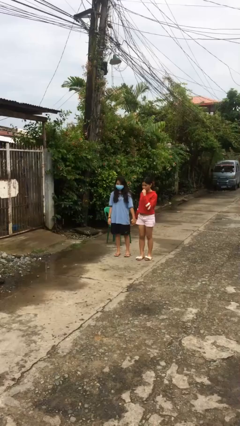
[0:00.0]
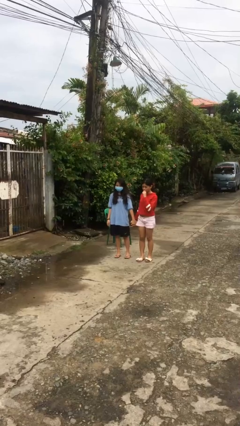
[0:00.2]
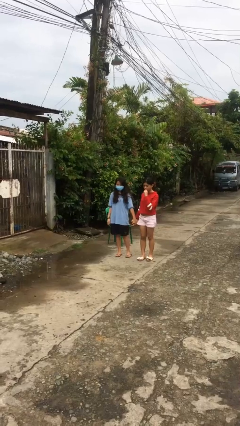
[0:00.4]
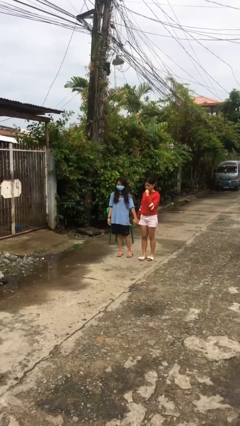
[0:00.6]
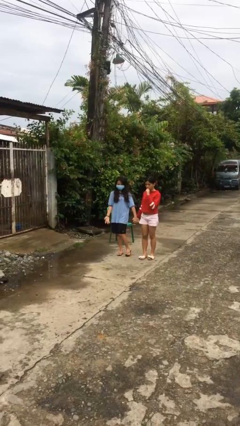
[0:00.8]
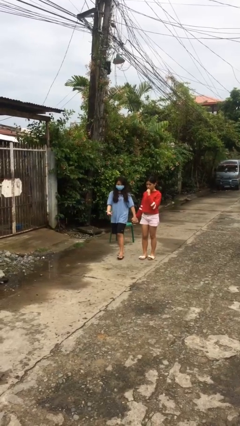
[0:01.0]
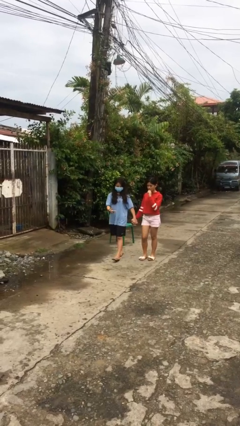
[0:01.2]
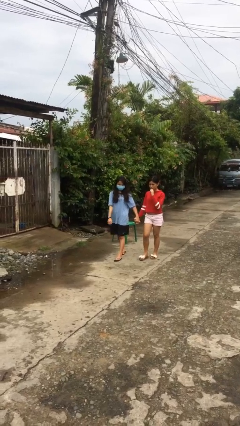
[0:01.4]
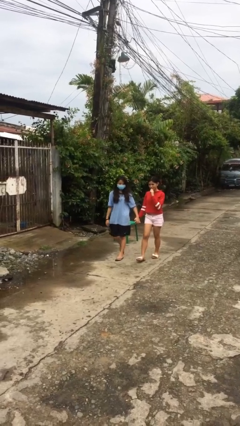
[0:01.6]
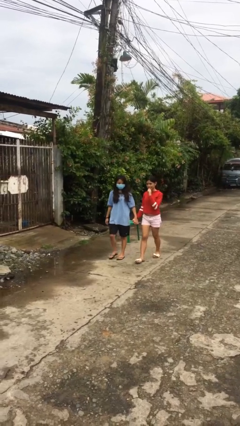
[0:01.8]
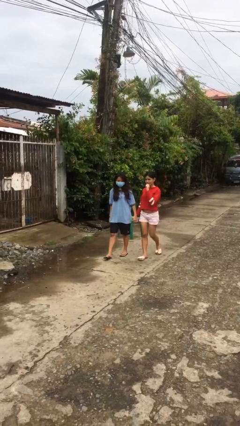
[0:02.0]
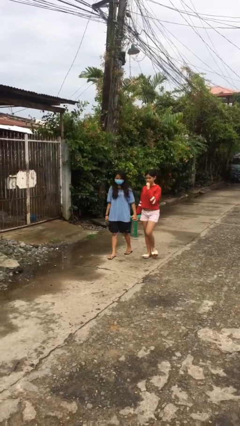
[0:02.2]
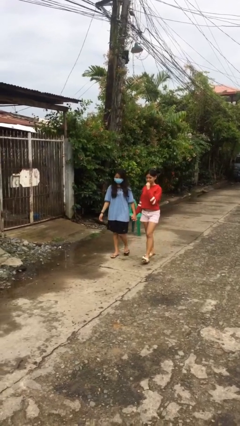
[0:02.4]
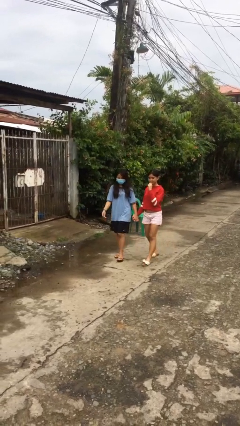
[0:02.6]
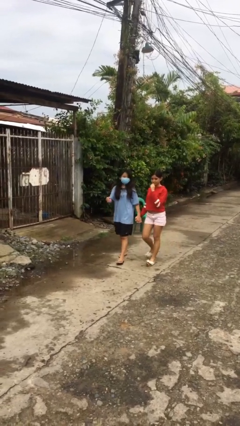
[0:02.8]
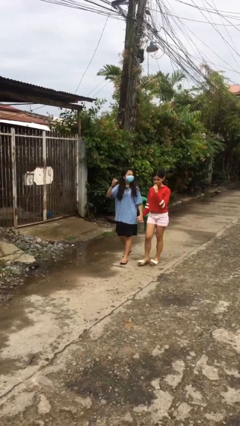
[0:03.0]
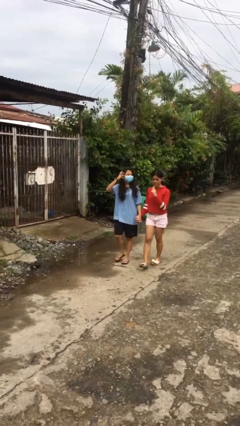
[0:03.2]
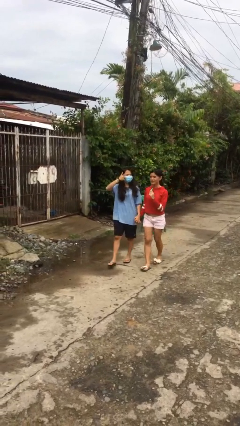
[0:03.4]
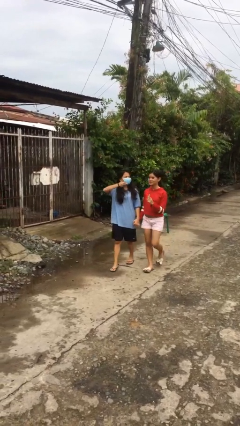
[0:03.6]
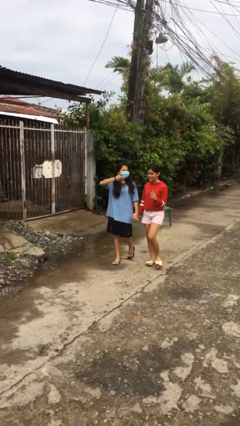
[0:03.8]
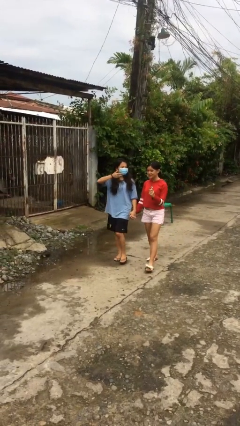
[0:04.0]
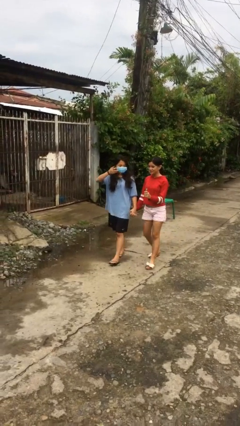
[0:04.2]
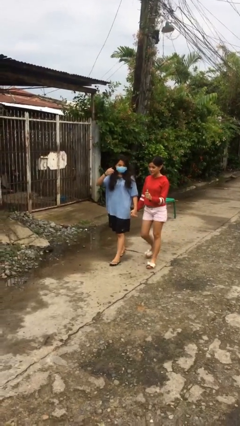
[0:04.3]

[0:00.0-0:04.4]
person holds hand

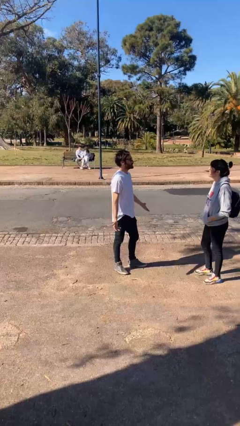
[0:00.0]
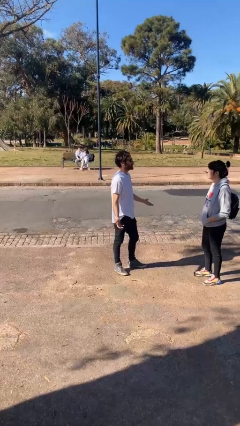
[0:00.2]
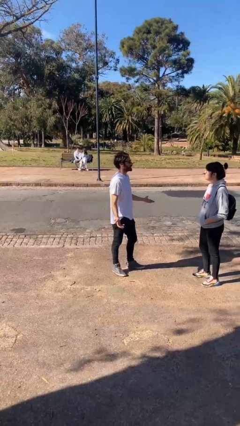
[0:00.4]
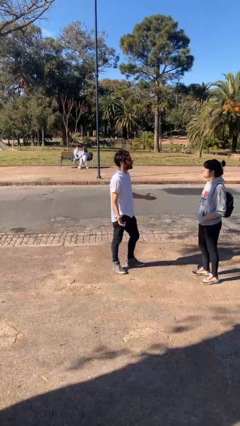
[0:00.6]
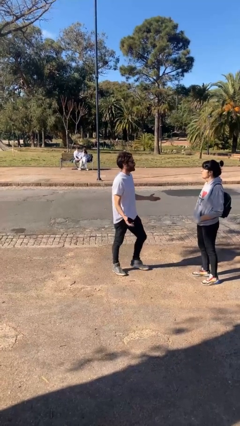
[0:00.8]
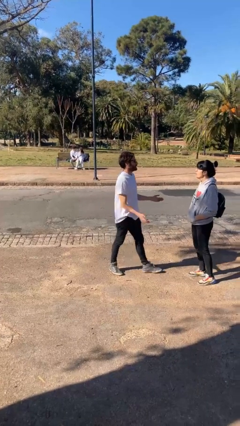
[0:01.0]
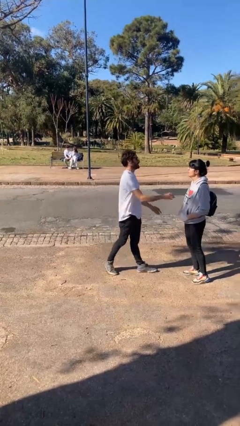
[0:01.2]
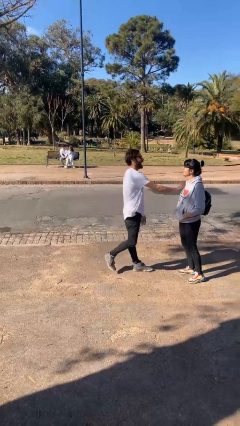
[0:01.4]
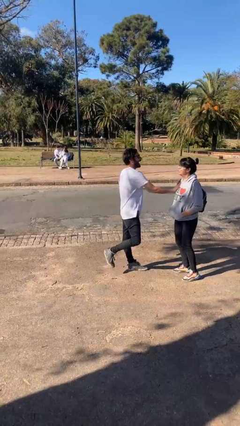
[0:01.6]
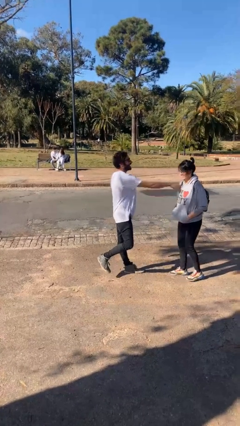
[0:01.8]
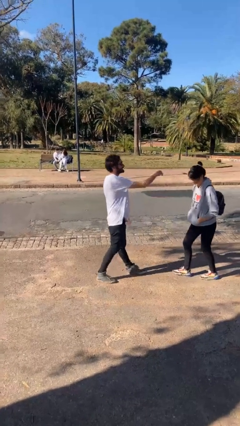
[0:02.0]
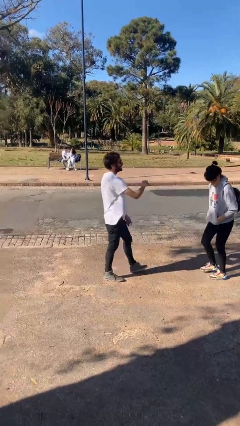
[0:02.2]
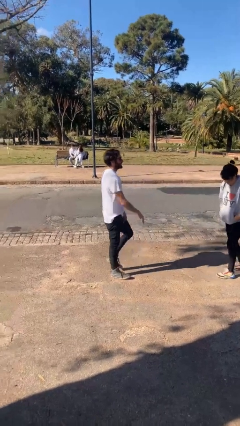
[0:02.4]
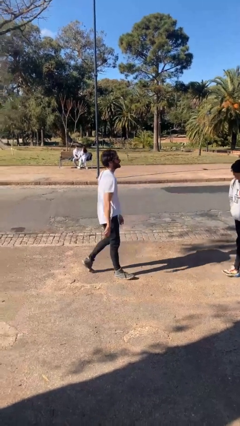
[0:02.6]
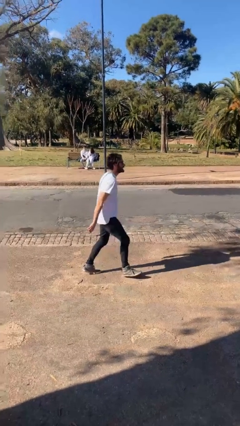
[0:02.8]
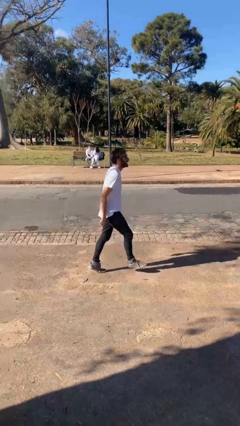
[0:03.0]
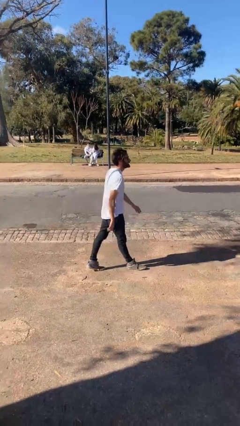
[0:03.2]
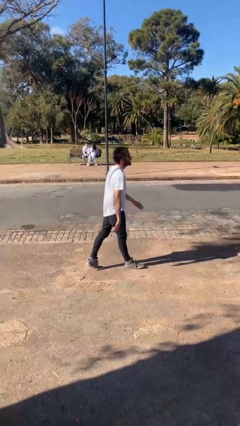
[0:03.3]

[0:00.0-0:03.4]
person shoves person

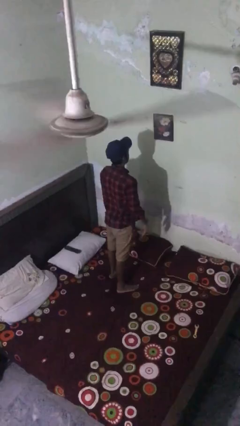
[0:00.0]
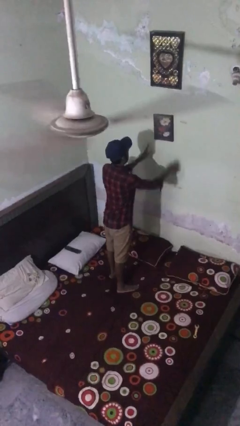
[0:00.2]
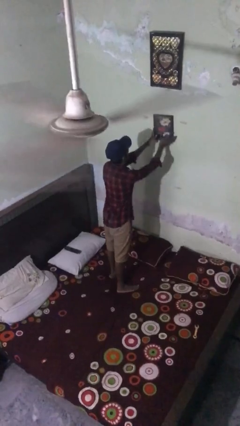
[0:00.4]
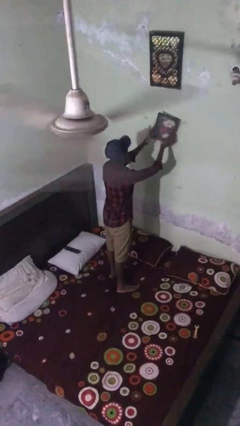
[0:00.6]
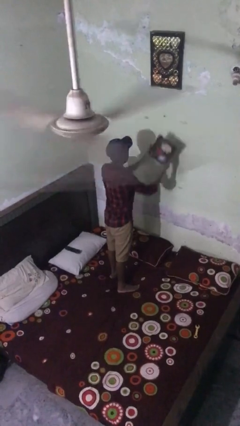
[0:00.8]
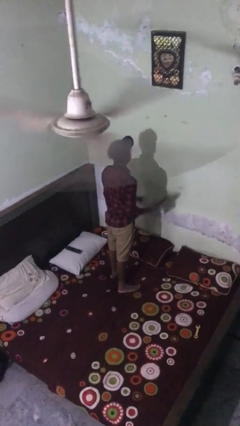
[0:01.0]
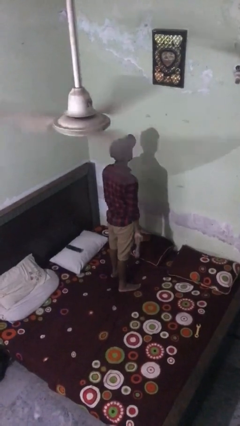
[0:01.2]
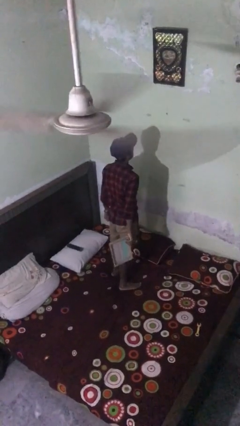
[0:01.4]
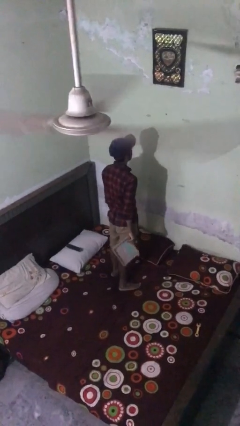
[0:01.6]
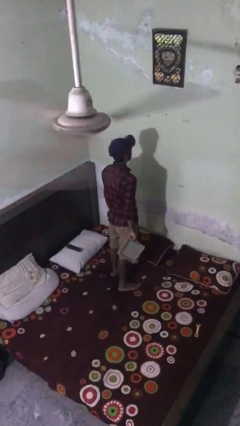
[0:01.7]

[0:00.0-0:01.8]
person takes down picture frame

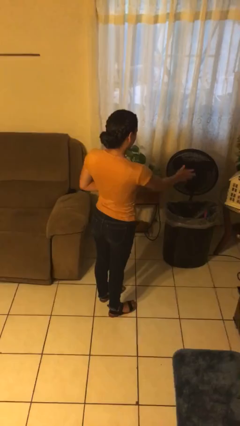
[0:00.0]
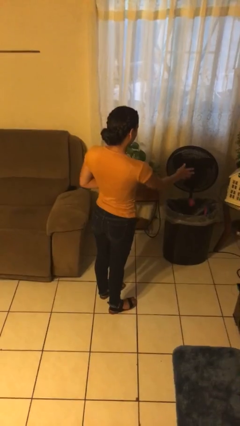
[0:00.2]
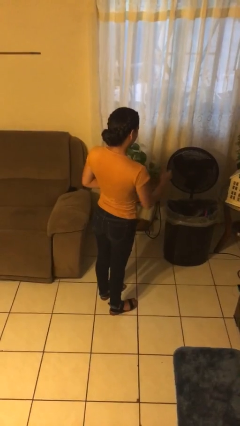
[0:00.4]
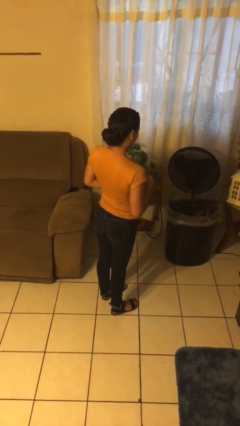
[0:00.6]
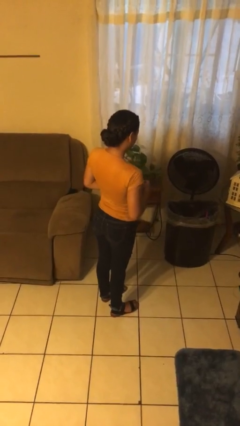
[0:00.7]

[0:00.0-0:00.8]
person discards trash

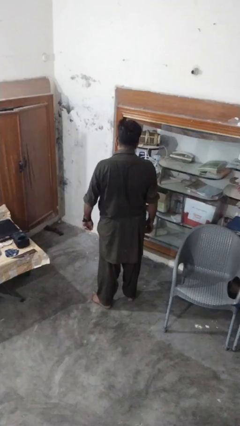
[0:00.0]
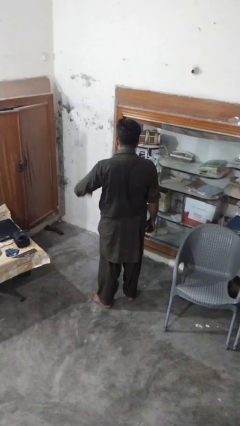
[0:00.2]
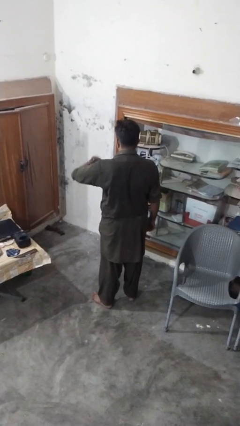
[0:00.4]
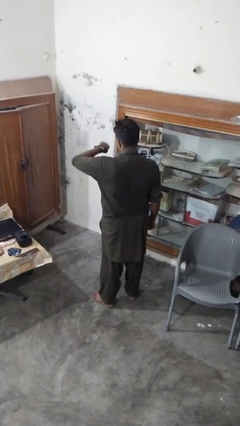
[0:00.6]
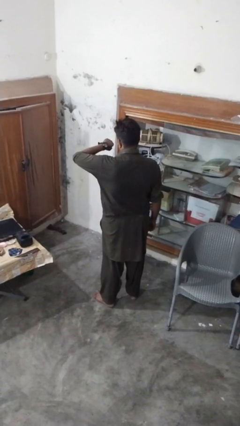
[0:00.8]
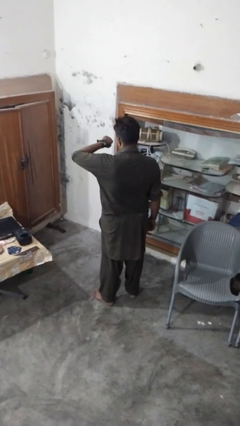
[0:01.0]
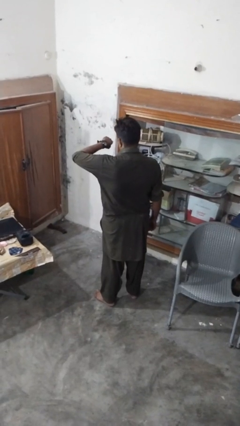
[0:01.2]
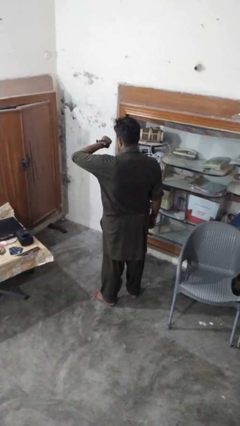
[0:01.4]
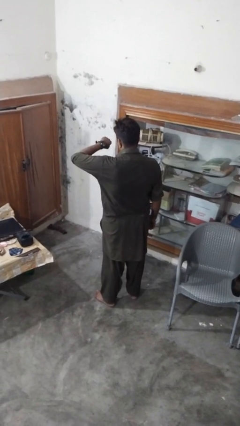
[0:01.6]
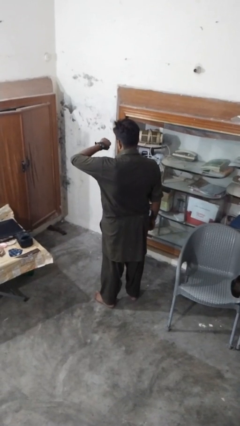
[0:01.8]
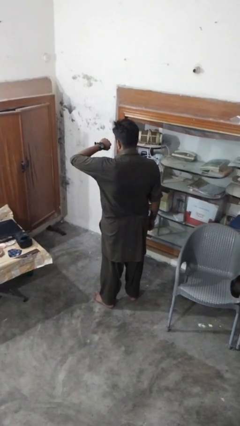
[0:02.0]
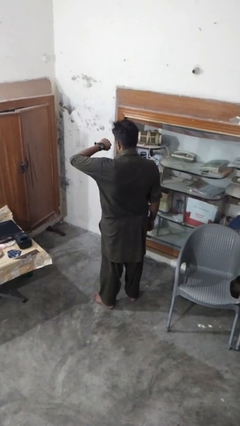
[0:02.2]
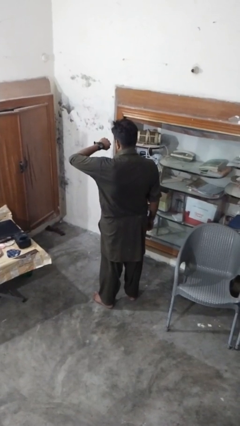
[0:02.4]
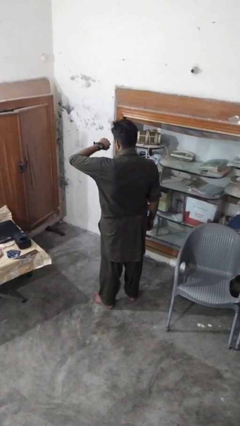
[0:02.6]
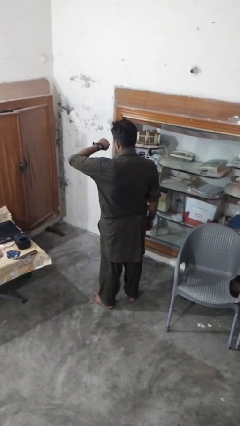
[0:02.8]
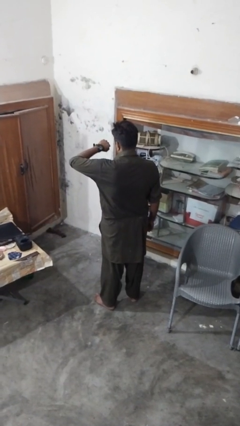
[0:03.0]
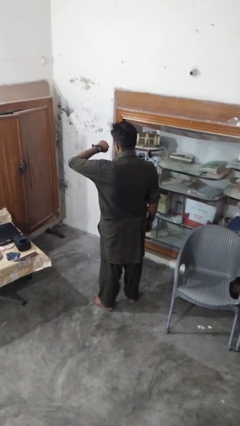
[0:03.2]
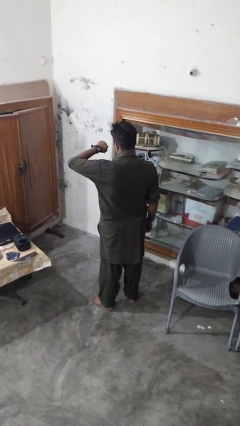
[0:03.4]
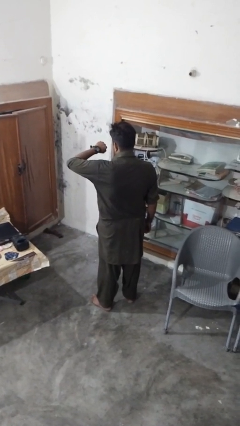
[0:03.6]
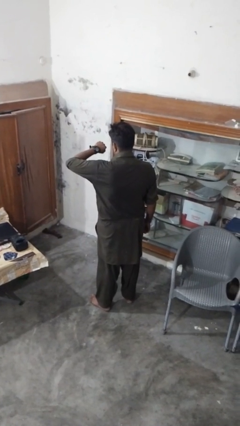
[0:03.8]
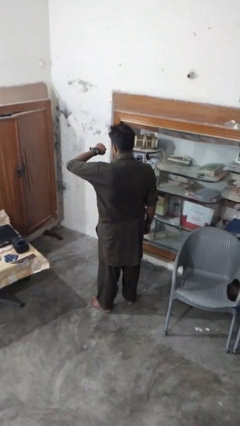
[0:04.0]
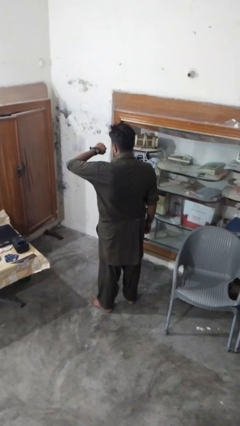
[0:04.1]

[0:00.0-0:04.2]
person looks at wristwatch

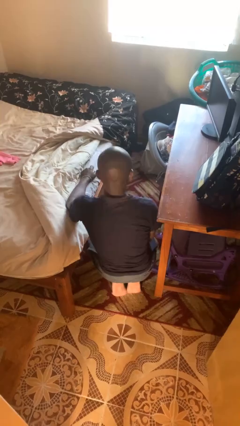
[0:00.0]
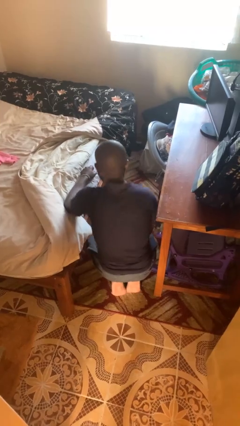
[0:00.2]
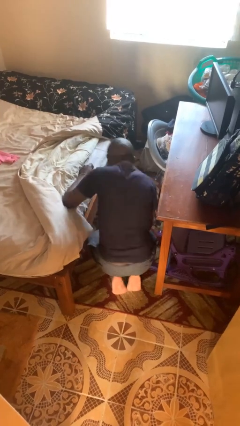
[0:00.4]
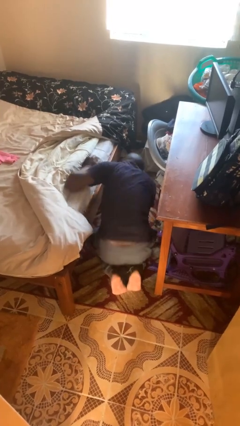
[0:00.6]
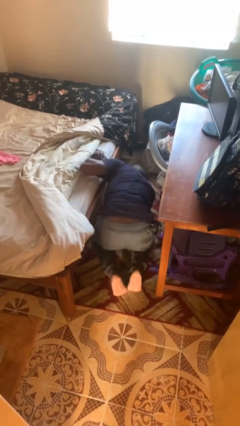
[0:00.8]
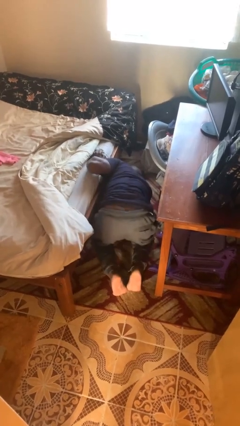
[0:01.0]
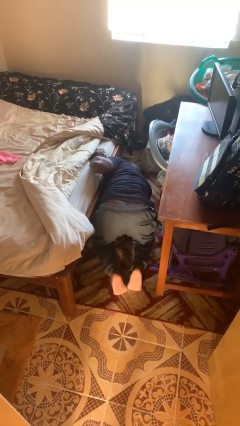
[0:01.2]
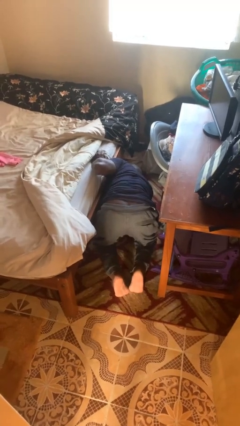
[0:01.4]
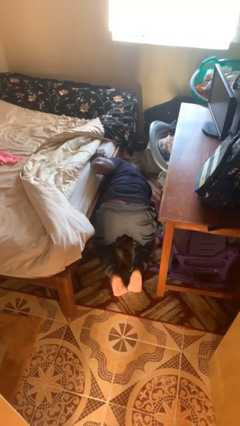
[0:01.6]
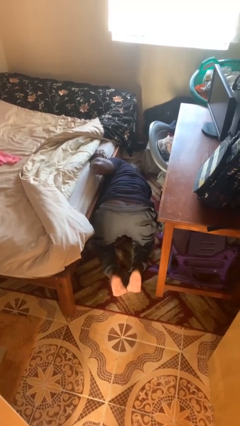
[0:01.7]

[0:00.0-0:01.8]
person searches under bed

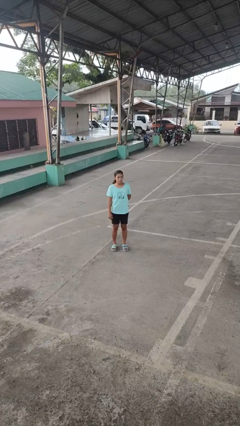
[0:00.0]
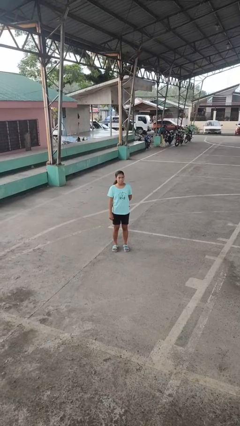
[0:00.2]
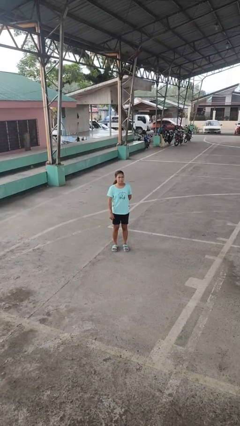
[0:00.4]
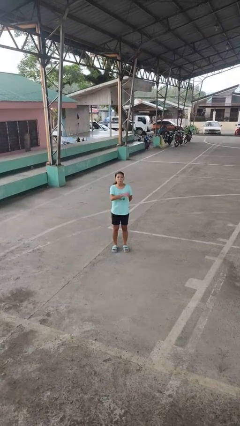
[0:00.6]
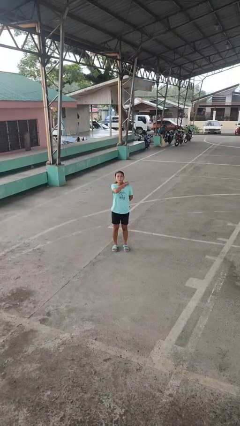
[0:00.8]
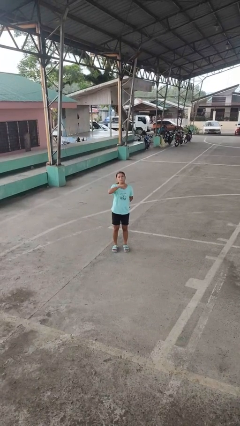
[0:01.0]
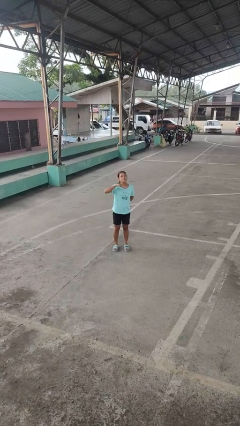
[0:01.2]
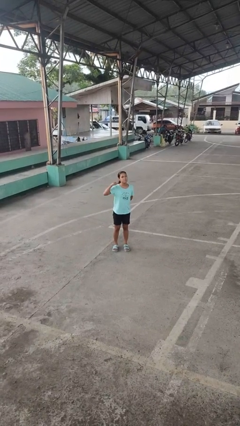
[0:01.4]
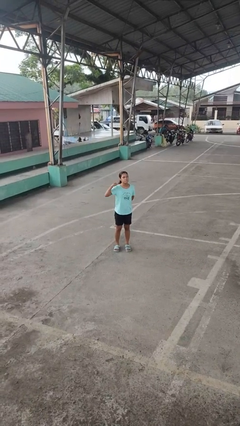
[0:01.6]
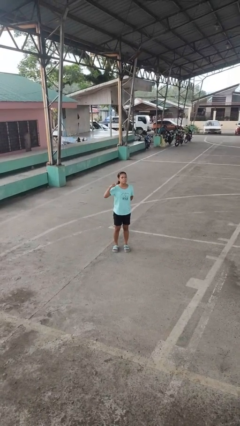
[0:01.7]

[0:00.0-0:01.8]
person gestures cut
